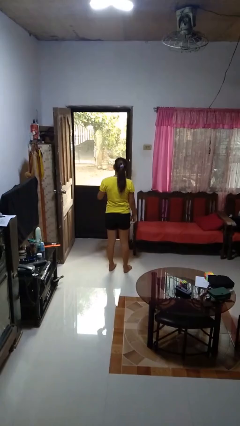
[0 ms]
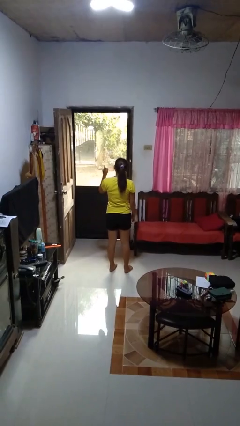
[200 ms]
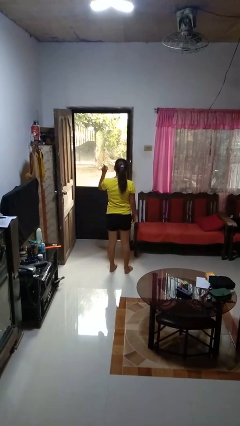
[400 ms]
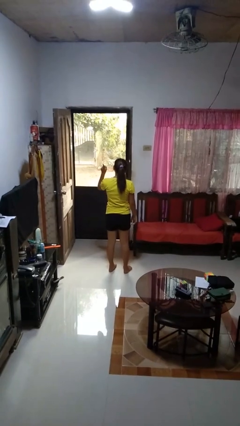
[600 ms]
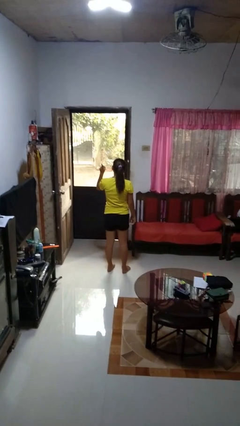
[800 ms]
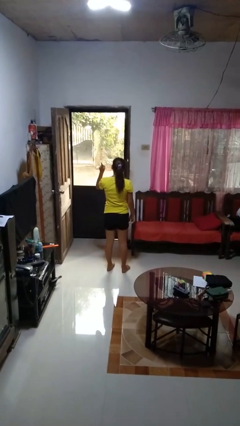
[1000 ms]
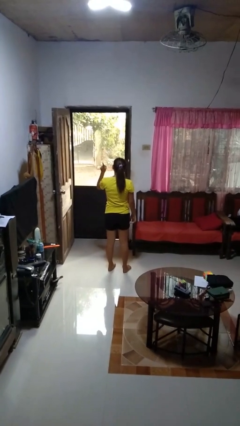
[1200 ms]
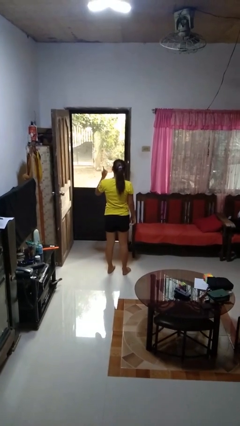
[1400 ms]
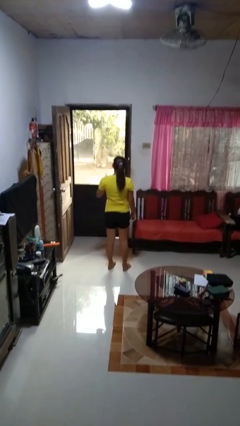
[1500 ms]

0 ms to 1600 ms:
person gestures number one

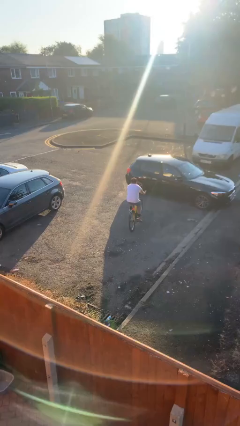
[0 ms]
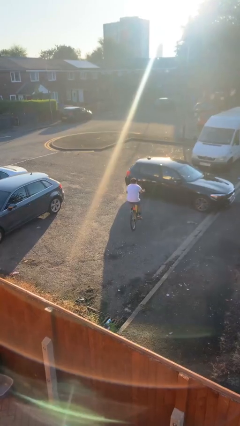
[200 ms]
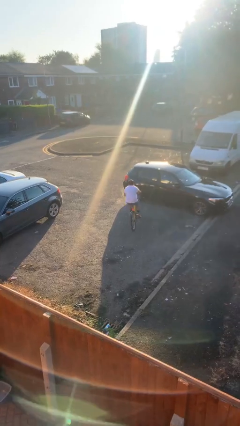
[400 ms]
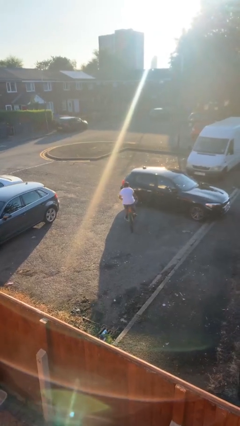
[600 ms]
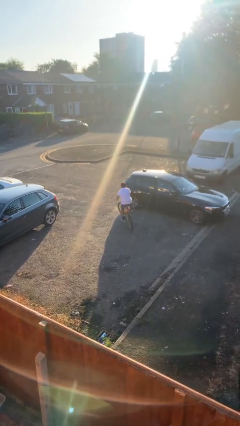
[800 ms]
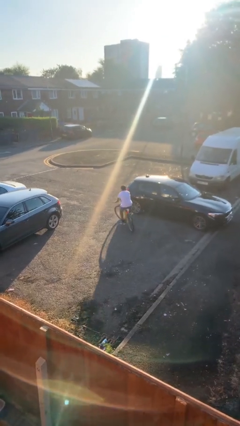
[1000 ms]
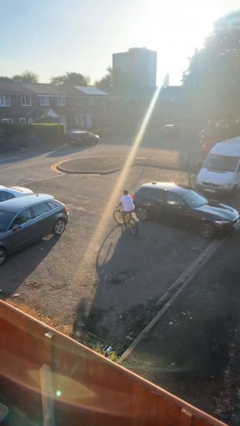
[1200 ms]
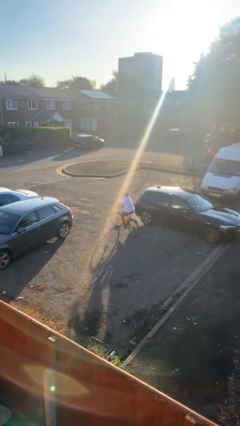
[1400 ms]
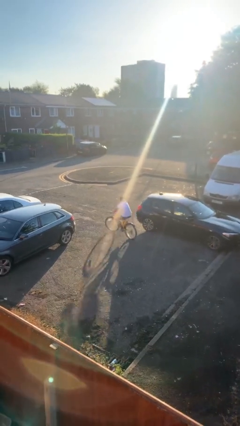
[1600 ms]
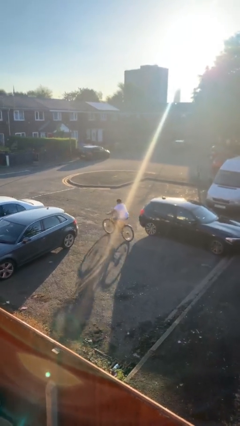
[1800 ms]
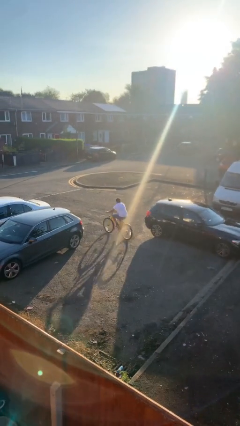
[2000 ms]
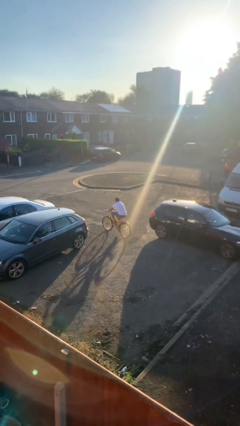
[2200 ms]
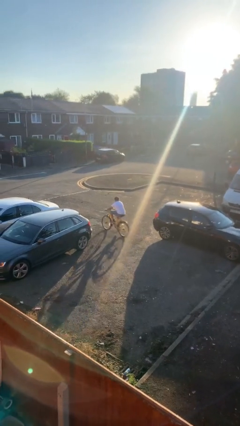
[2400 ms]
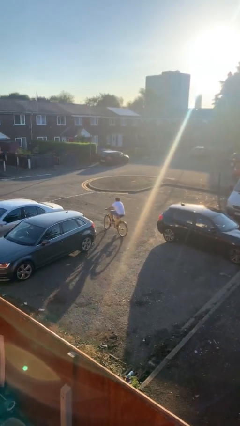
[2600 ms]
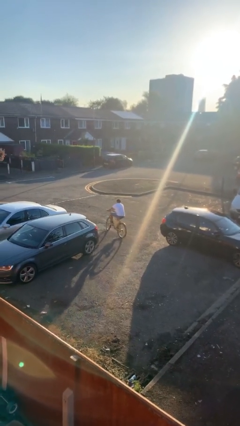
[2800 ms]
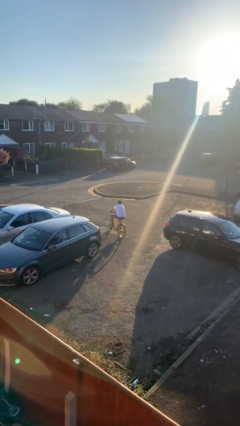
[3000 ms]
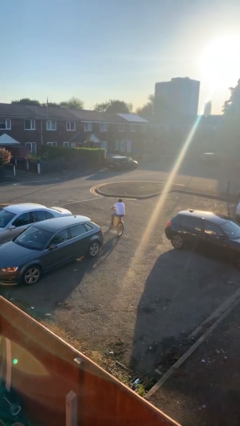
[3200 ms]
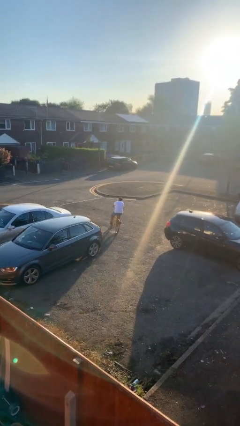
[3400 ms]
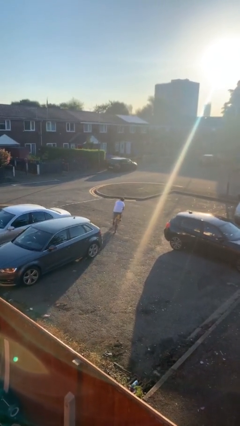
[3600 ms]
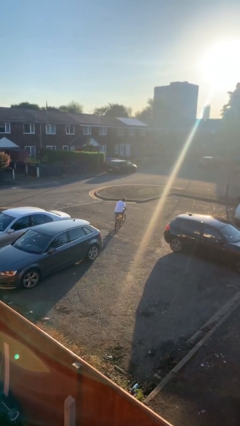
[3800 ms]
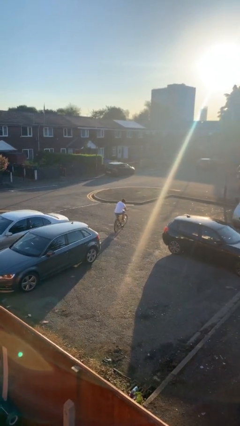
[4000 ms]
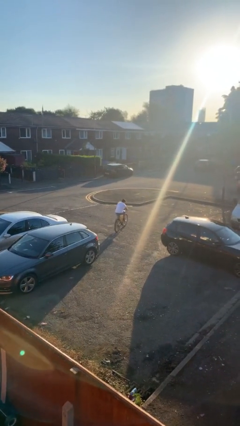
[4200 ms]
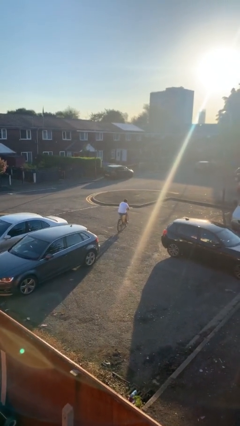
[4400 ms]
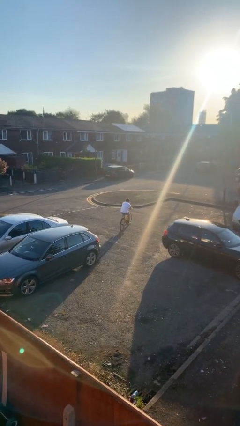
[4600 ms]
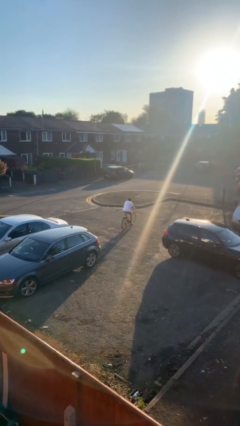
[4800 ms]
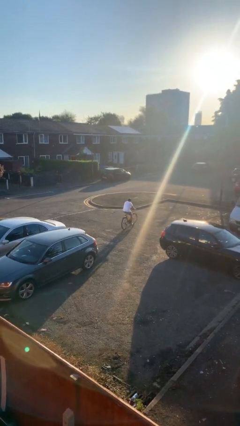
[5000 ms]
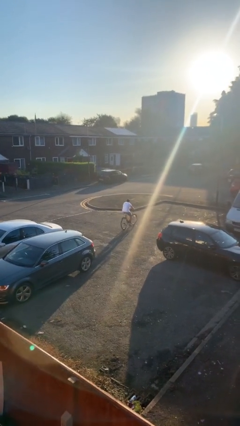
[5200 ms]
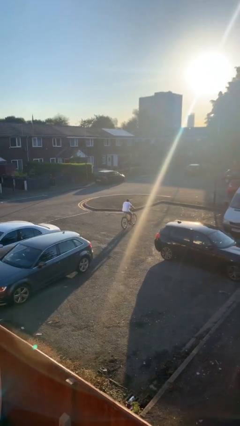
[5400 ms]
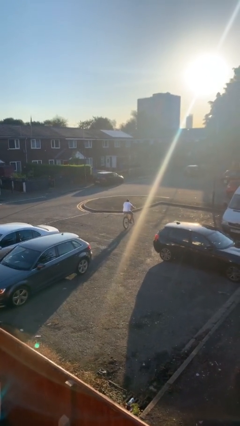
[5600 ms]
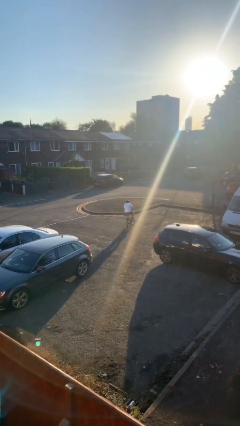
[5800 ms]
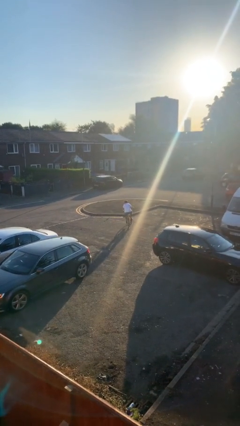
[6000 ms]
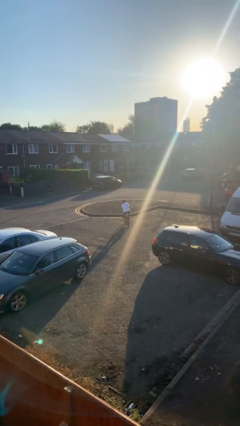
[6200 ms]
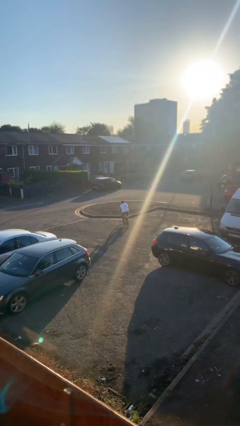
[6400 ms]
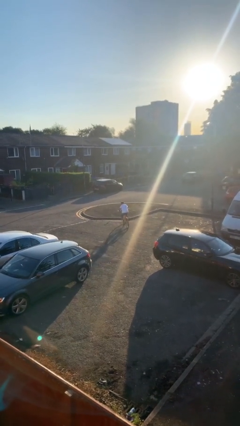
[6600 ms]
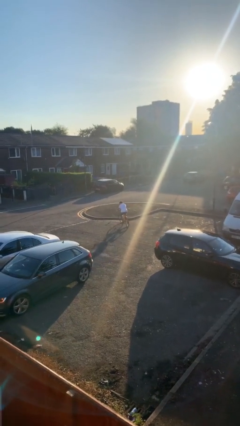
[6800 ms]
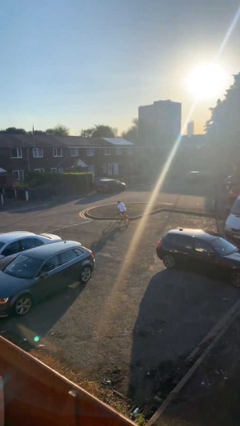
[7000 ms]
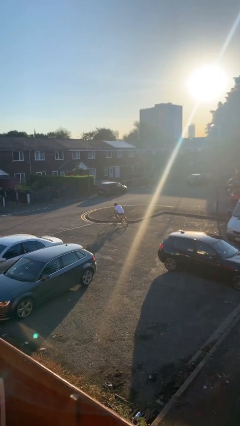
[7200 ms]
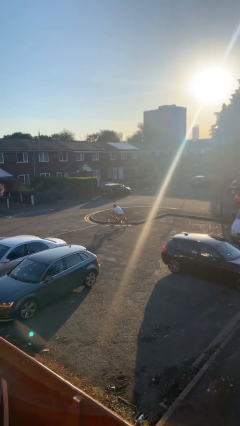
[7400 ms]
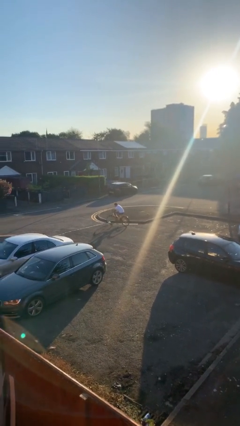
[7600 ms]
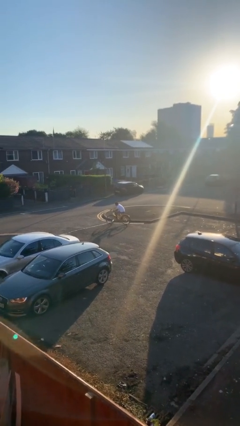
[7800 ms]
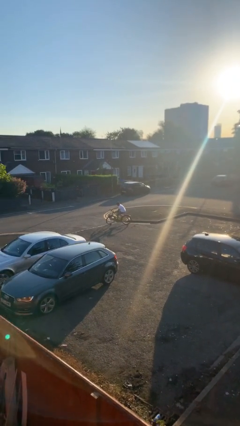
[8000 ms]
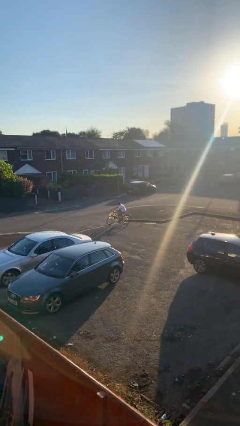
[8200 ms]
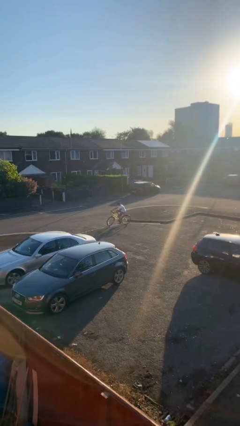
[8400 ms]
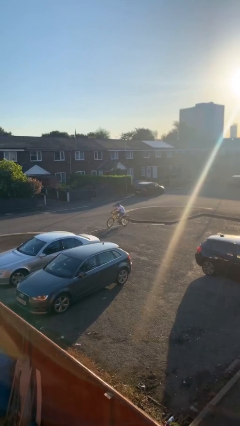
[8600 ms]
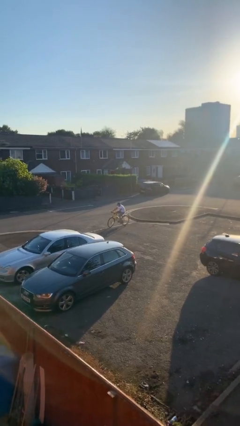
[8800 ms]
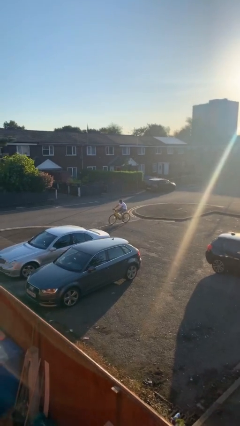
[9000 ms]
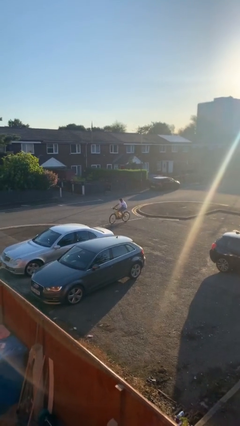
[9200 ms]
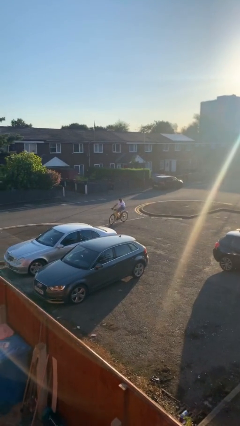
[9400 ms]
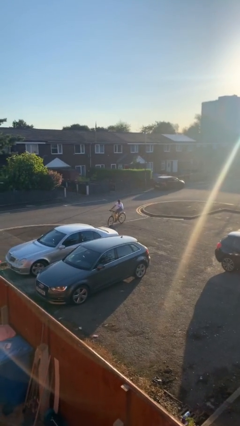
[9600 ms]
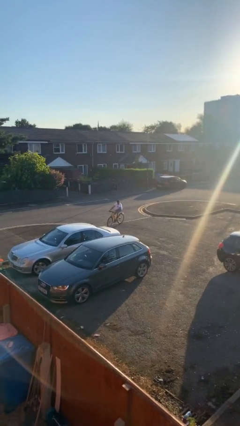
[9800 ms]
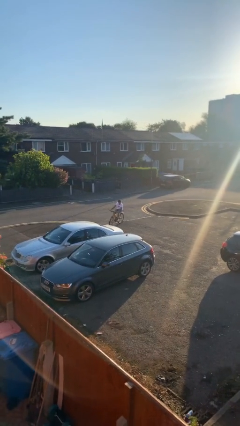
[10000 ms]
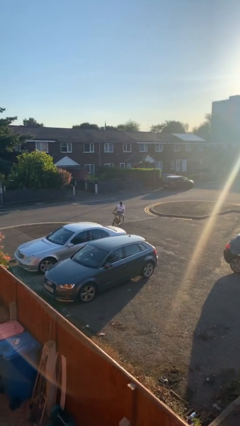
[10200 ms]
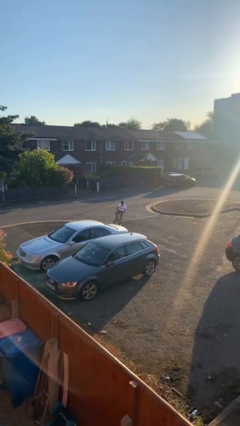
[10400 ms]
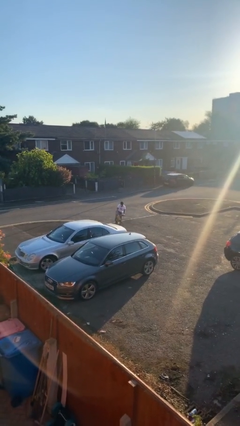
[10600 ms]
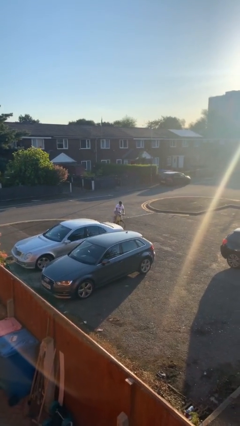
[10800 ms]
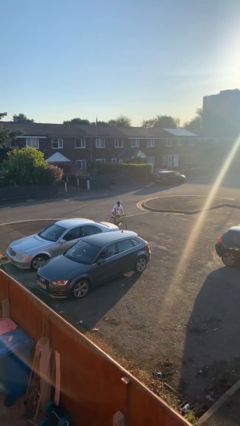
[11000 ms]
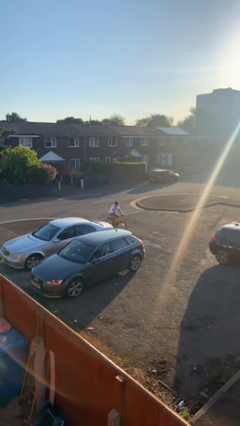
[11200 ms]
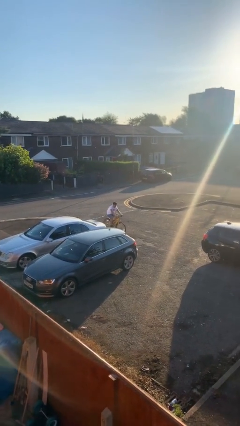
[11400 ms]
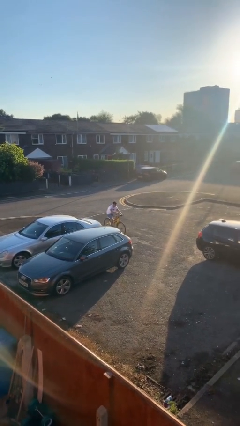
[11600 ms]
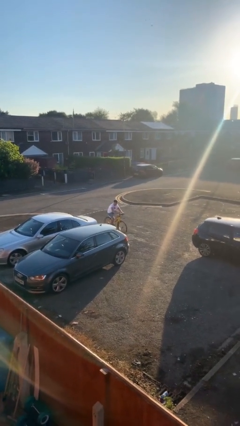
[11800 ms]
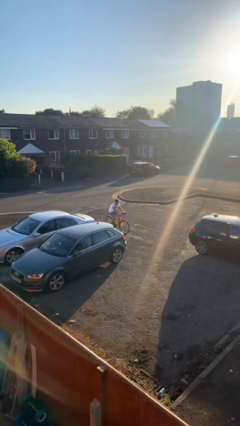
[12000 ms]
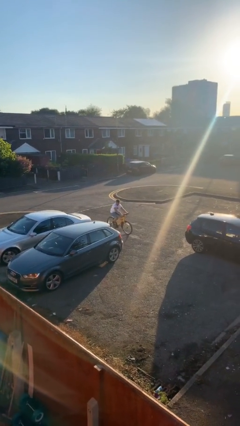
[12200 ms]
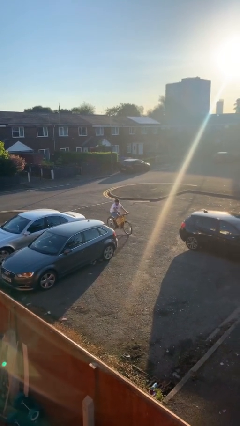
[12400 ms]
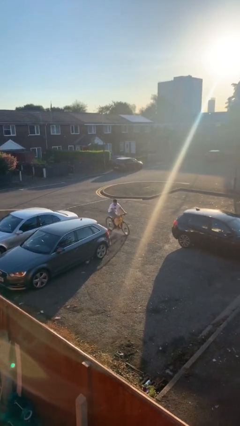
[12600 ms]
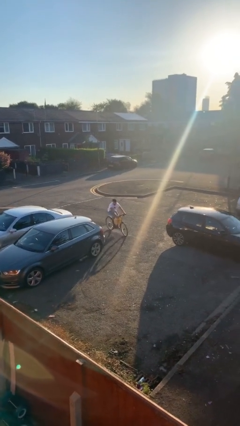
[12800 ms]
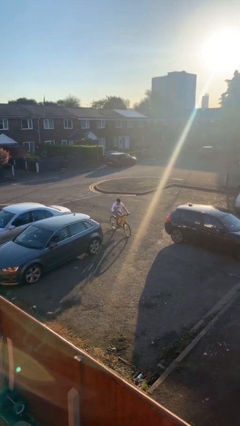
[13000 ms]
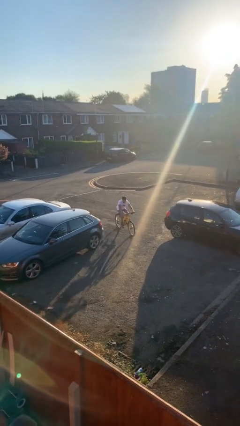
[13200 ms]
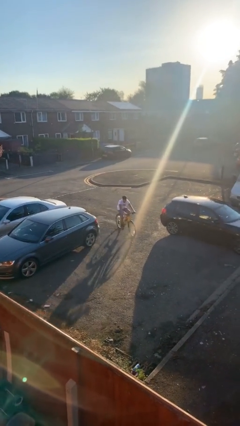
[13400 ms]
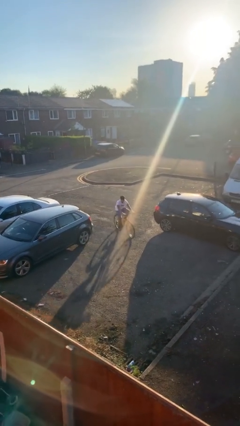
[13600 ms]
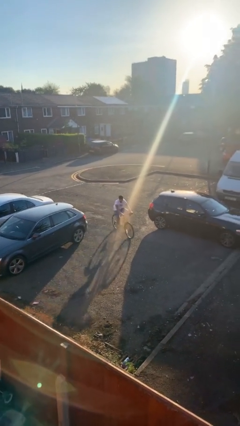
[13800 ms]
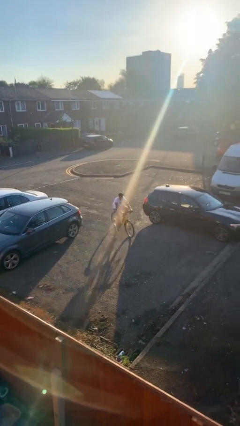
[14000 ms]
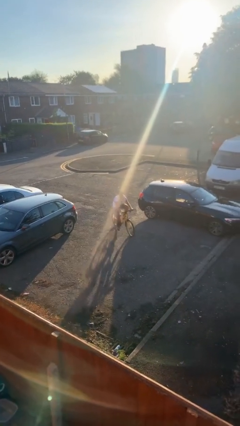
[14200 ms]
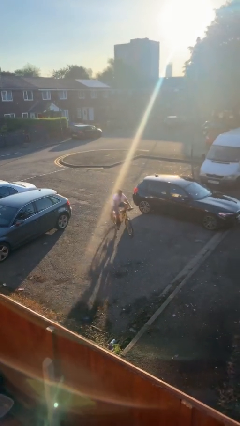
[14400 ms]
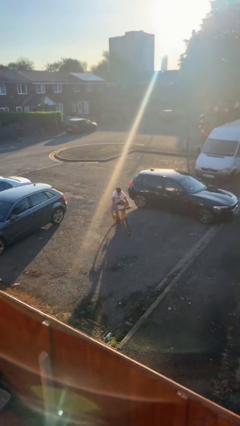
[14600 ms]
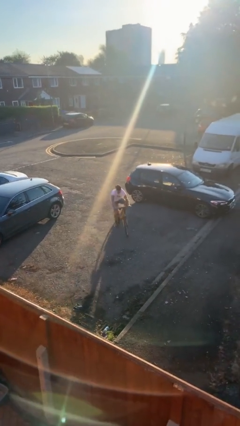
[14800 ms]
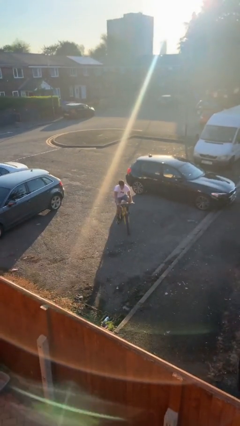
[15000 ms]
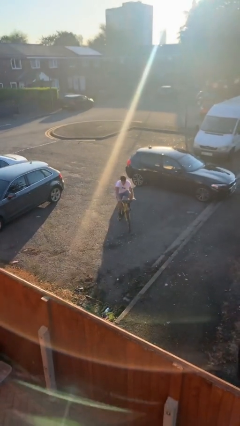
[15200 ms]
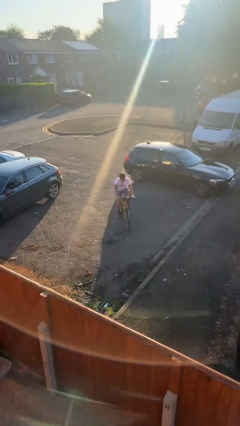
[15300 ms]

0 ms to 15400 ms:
person rides bicycle

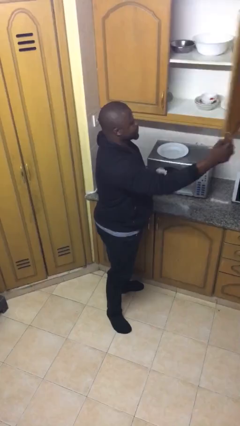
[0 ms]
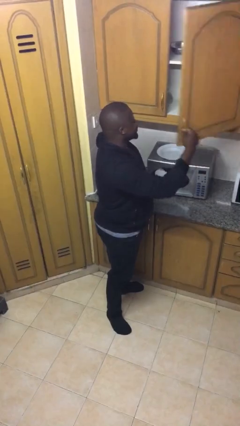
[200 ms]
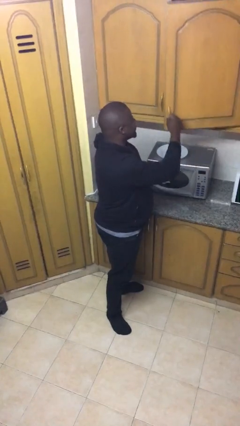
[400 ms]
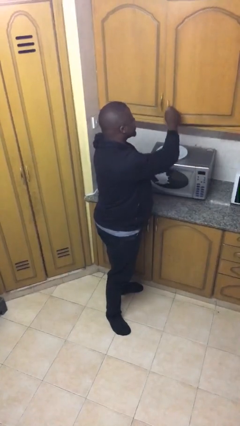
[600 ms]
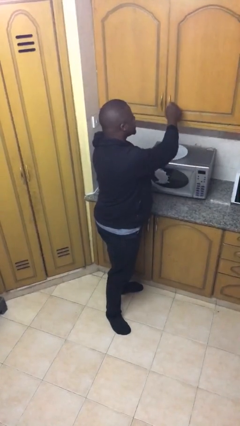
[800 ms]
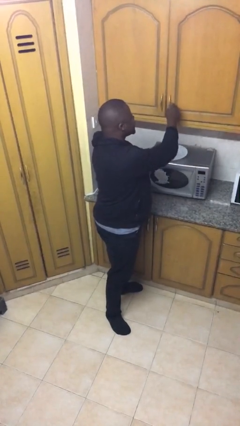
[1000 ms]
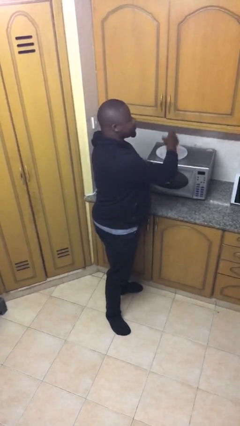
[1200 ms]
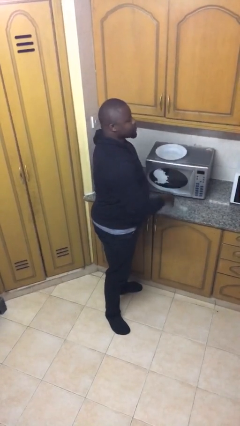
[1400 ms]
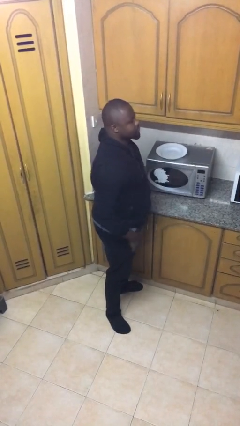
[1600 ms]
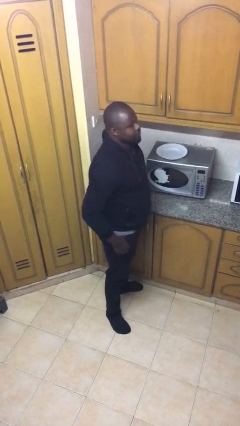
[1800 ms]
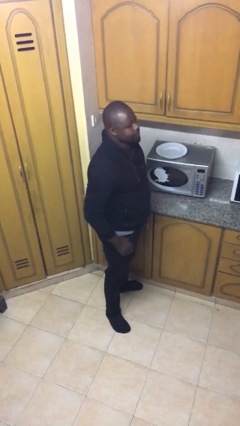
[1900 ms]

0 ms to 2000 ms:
person closes cabinet
